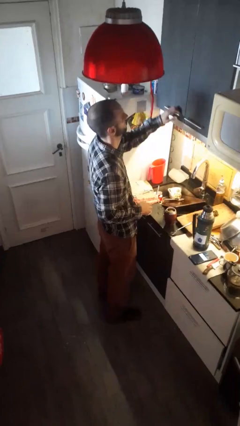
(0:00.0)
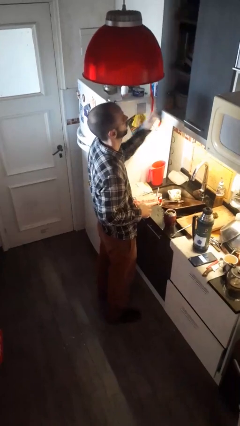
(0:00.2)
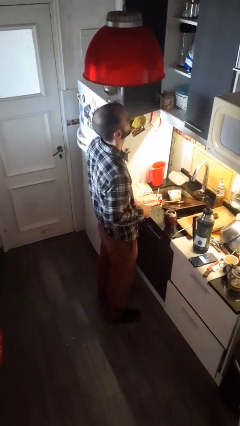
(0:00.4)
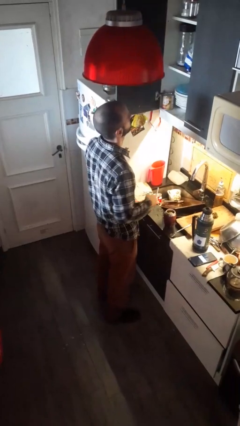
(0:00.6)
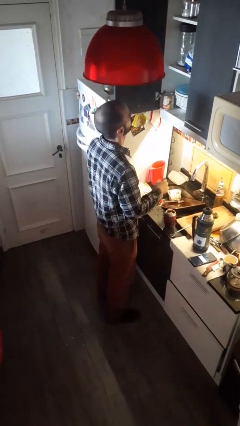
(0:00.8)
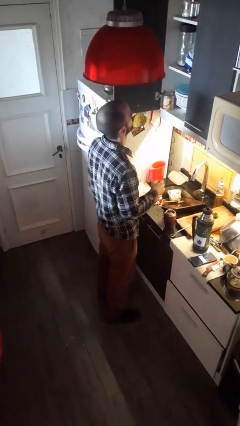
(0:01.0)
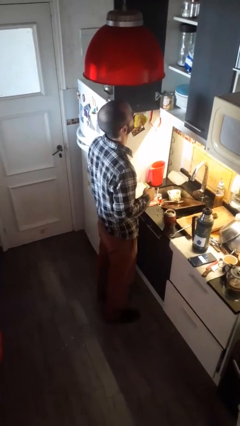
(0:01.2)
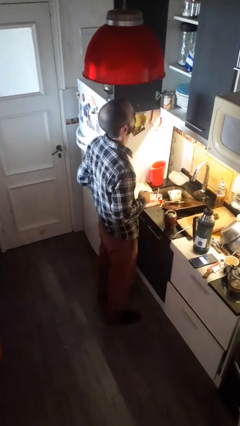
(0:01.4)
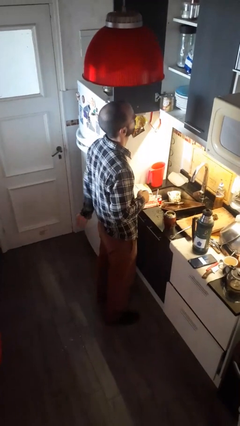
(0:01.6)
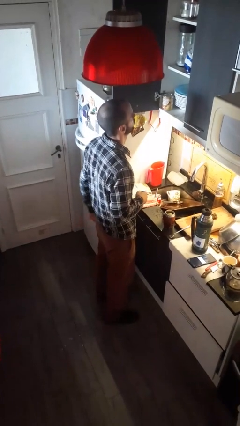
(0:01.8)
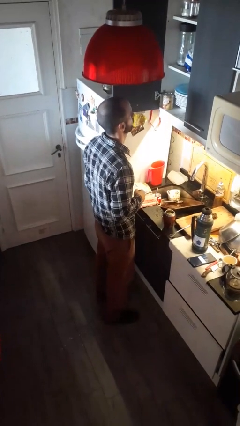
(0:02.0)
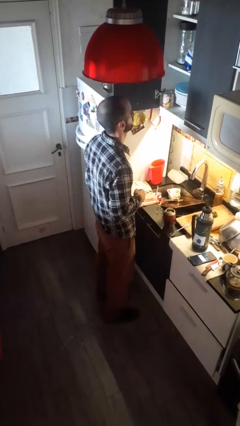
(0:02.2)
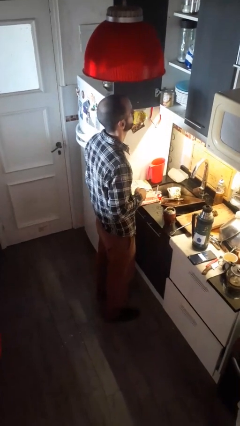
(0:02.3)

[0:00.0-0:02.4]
person opens kitchen drawer

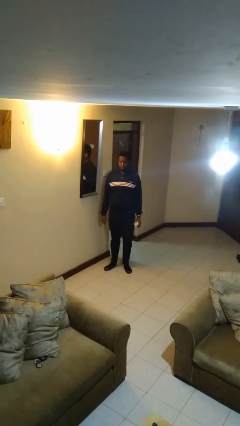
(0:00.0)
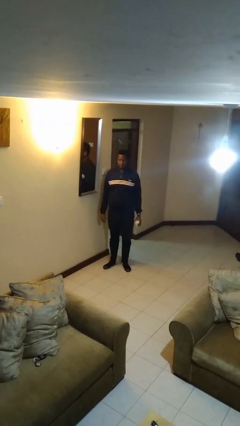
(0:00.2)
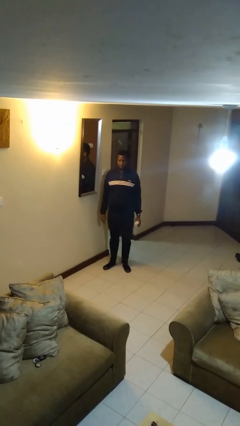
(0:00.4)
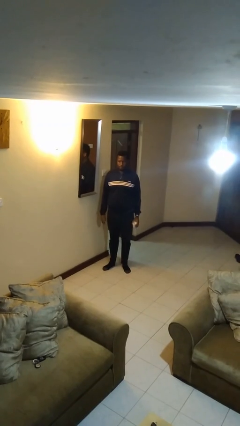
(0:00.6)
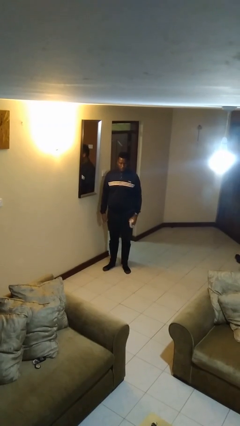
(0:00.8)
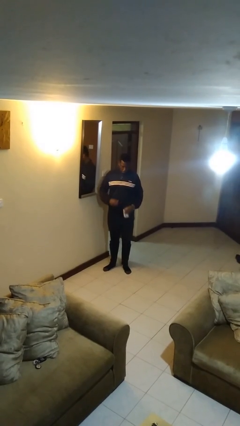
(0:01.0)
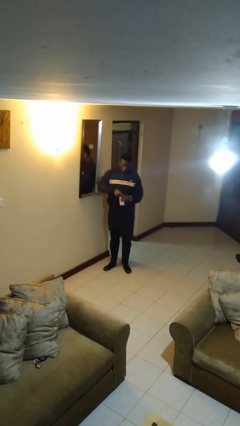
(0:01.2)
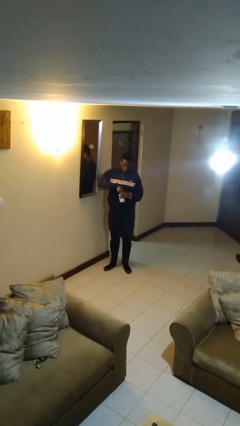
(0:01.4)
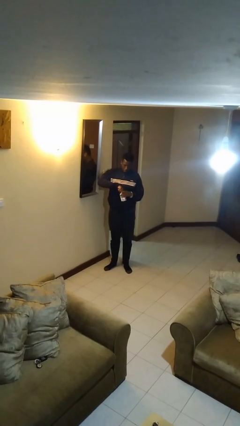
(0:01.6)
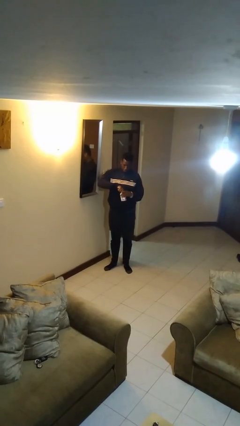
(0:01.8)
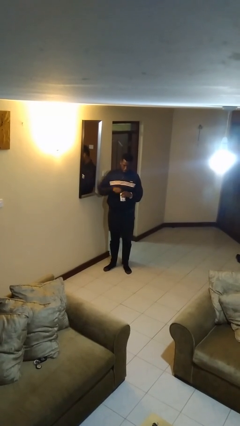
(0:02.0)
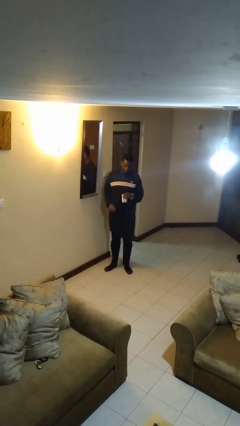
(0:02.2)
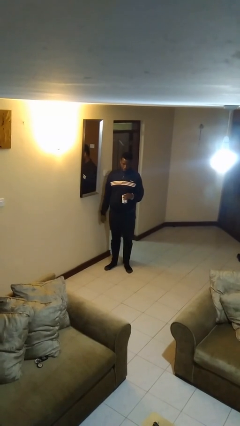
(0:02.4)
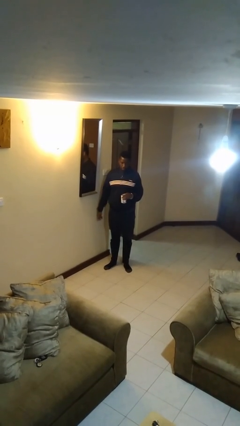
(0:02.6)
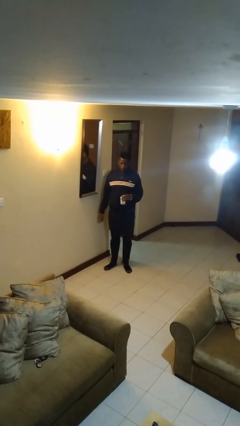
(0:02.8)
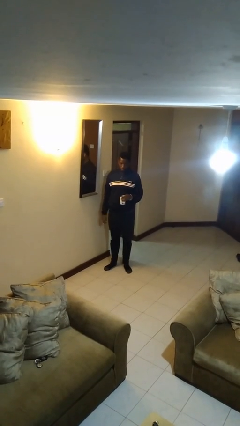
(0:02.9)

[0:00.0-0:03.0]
person opens beverage can

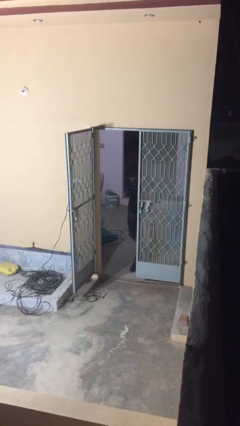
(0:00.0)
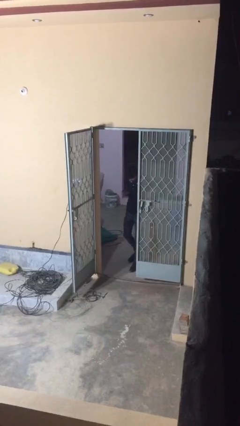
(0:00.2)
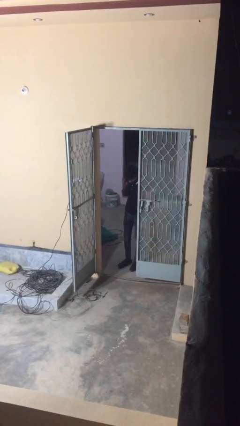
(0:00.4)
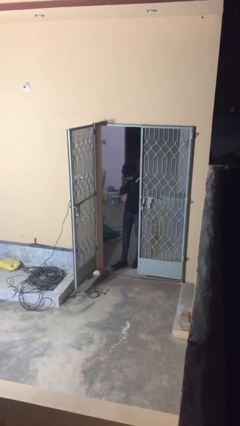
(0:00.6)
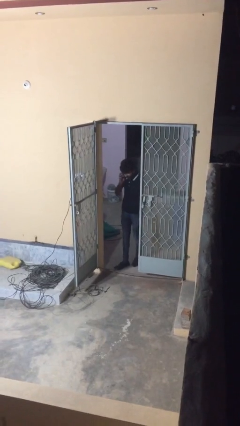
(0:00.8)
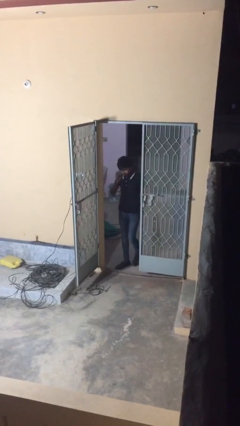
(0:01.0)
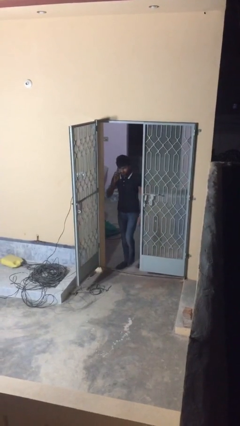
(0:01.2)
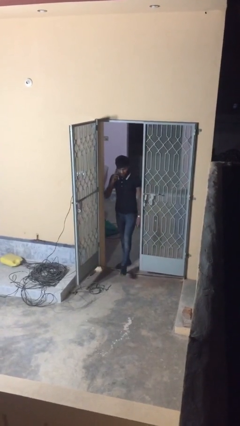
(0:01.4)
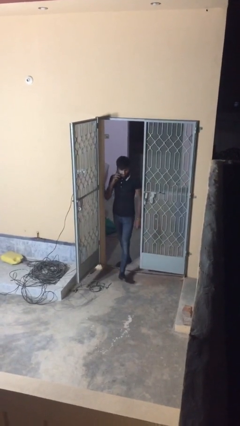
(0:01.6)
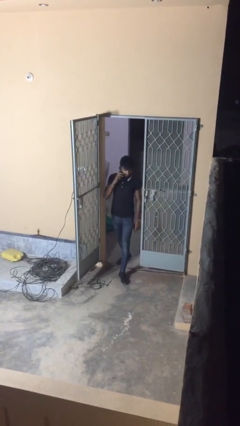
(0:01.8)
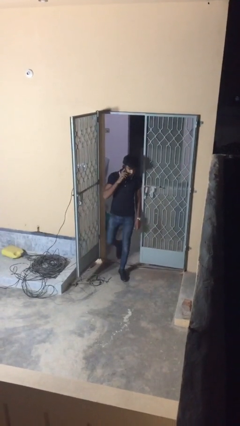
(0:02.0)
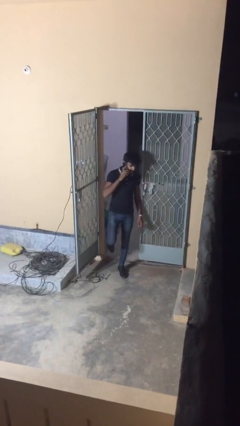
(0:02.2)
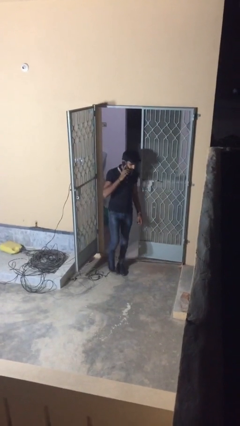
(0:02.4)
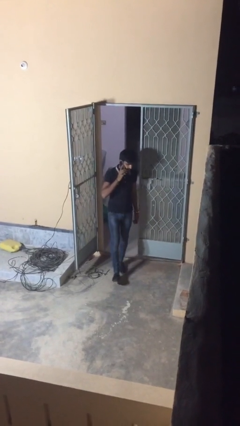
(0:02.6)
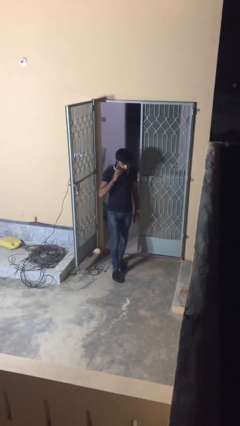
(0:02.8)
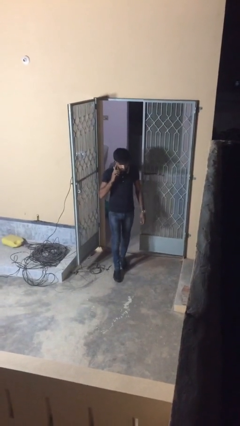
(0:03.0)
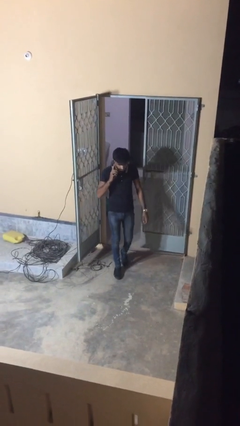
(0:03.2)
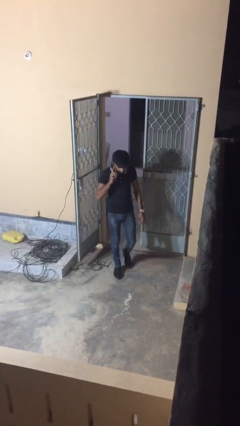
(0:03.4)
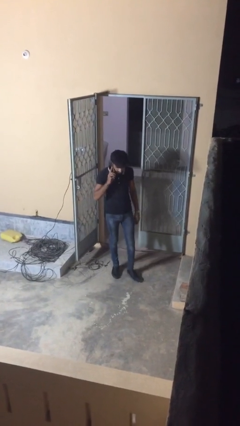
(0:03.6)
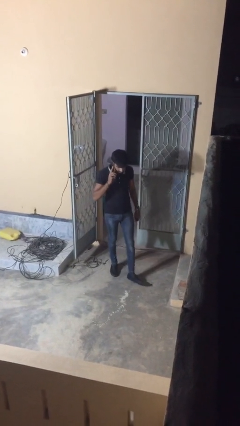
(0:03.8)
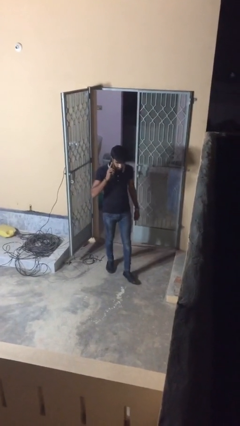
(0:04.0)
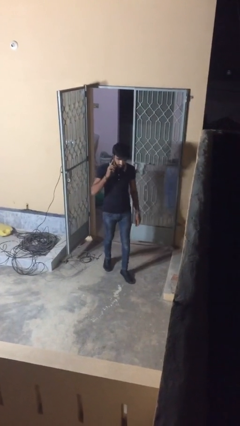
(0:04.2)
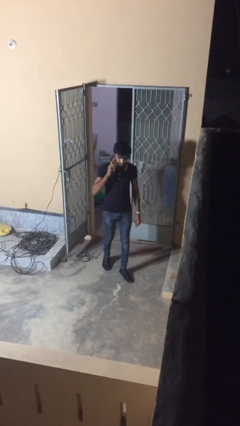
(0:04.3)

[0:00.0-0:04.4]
person enters scene through structure

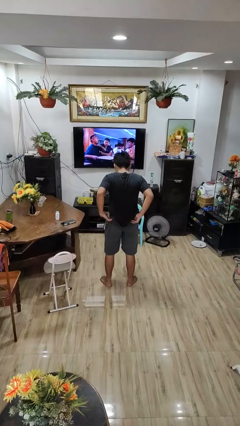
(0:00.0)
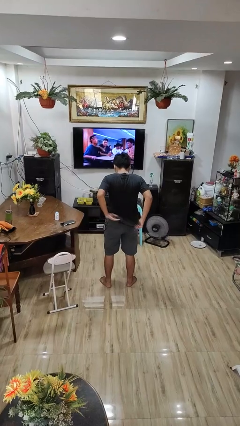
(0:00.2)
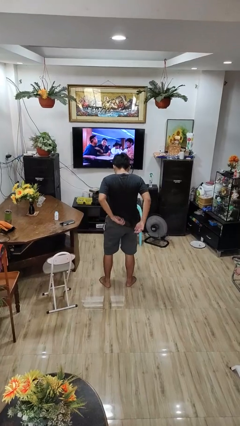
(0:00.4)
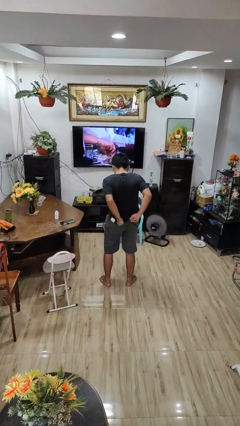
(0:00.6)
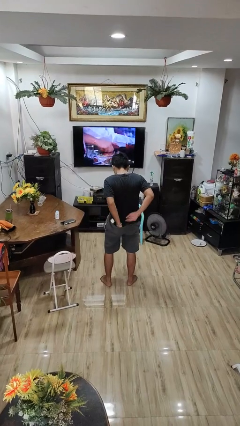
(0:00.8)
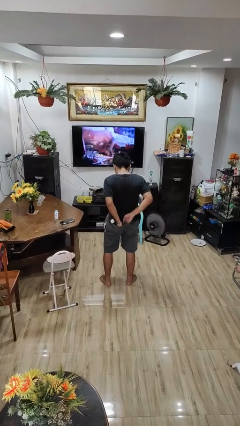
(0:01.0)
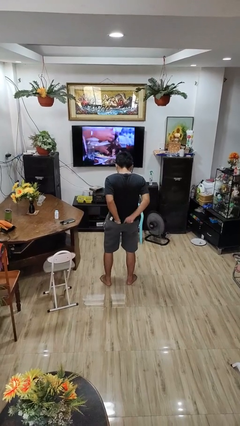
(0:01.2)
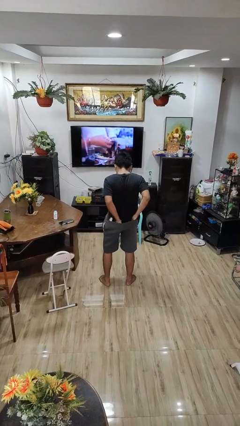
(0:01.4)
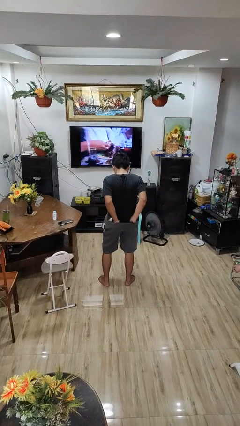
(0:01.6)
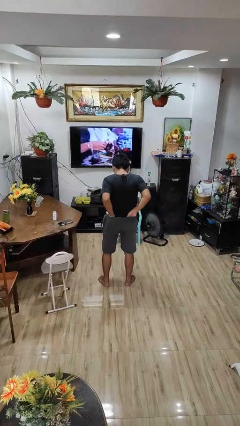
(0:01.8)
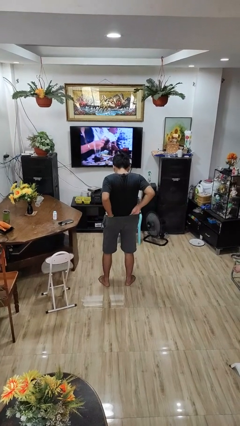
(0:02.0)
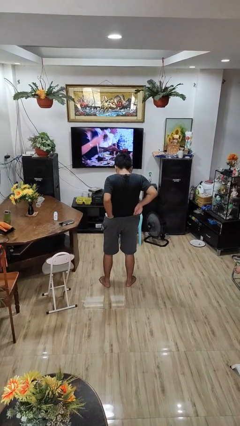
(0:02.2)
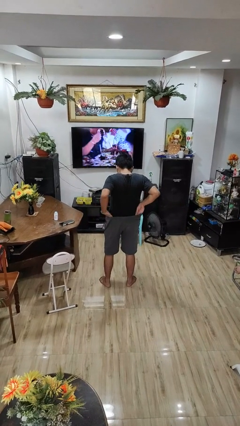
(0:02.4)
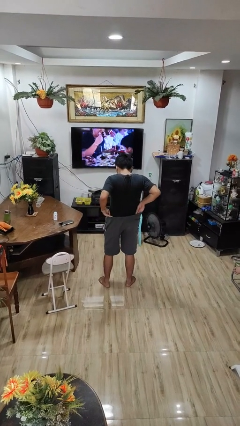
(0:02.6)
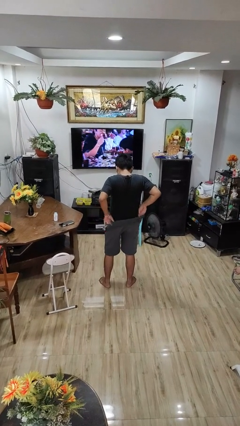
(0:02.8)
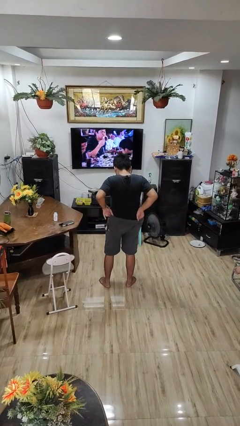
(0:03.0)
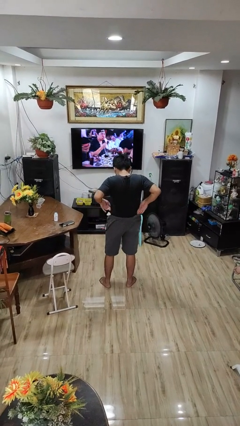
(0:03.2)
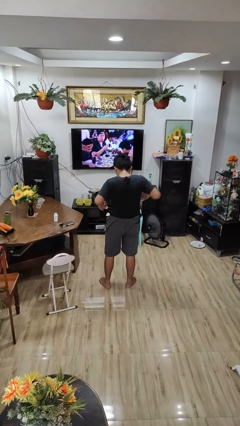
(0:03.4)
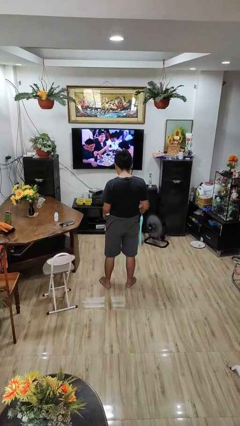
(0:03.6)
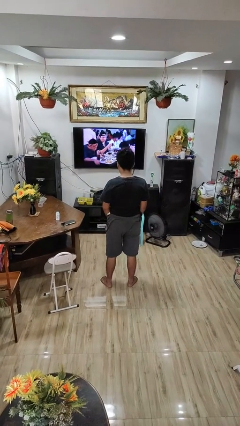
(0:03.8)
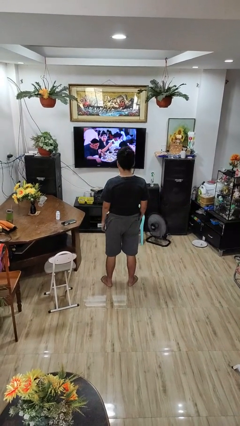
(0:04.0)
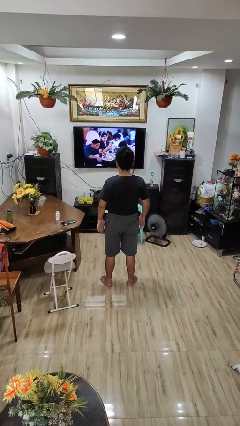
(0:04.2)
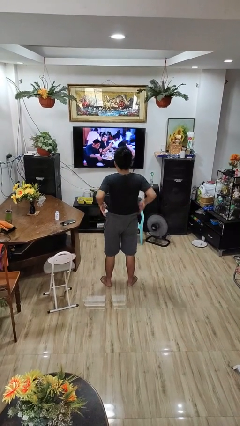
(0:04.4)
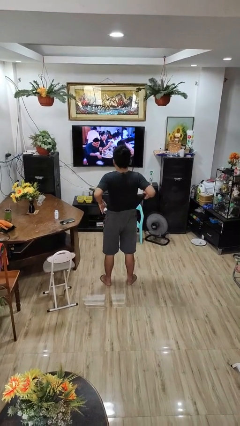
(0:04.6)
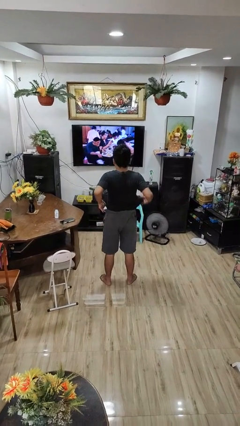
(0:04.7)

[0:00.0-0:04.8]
person tucks in shirt

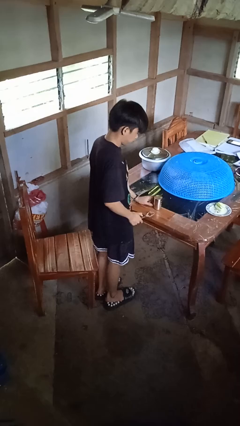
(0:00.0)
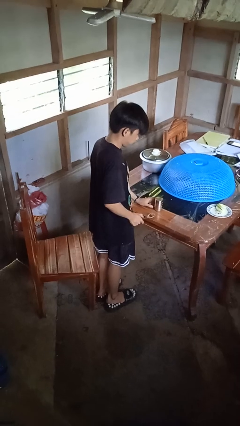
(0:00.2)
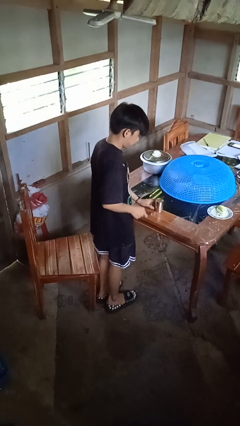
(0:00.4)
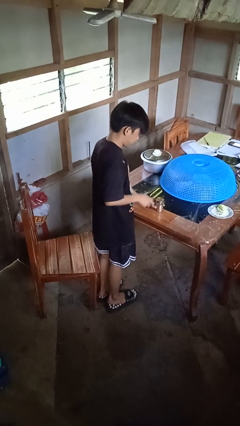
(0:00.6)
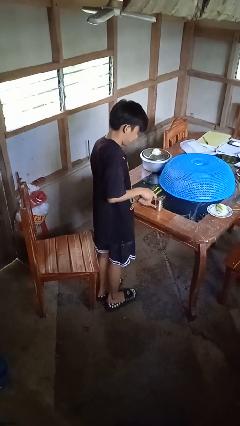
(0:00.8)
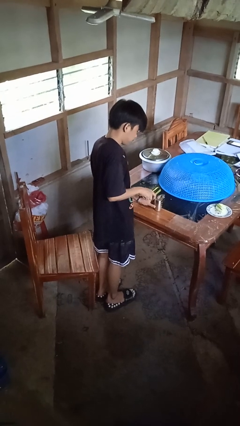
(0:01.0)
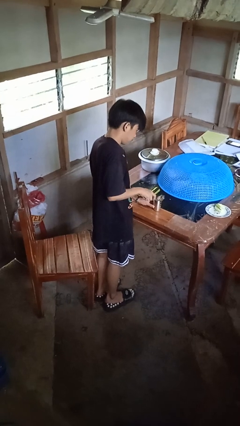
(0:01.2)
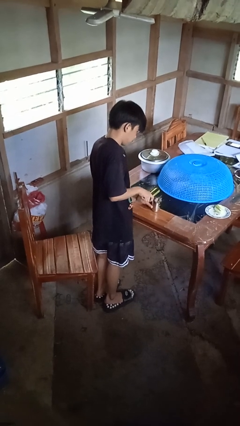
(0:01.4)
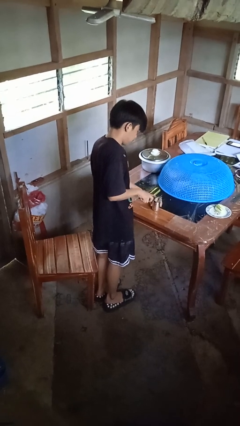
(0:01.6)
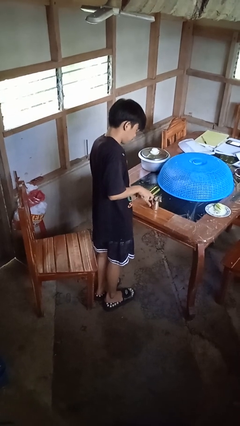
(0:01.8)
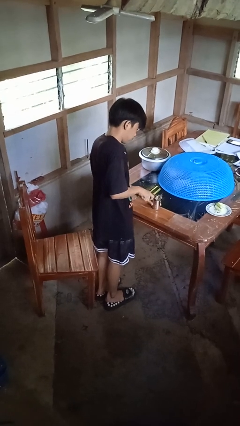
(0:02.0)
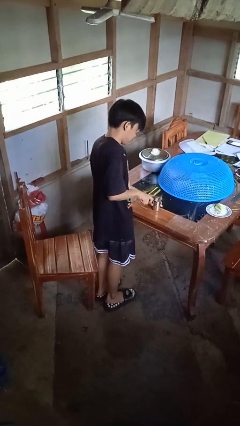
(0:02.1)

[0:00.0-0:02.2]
person opens can with can opener

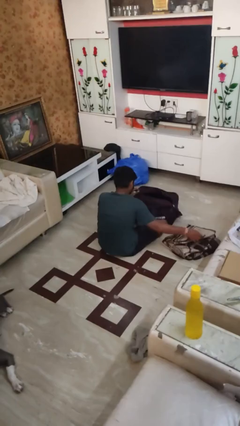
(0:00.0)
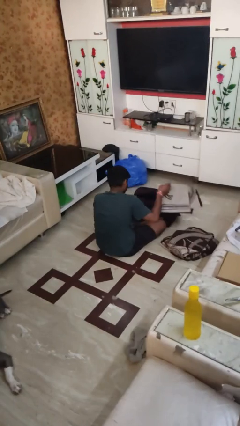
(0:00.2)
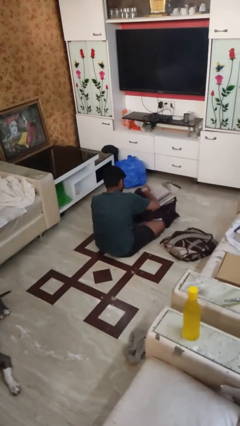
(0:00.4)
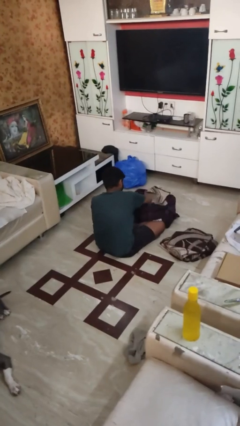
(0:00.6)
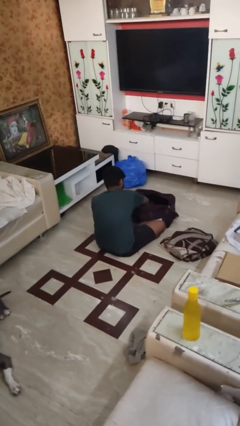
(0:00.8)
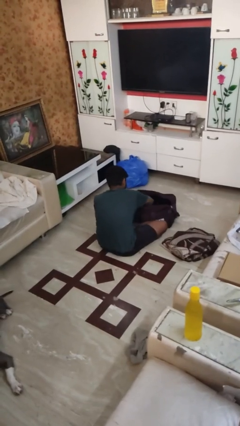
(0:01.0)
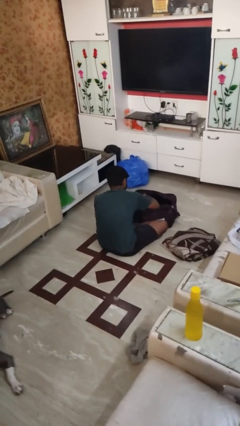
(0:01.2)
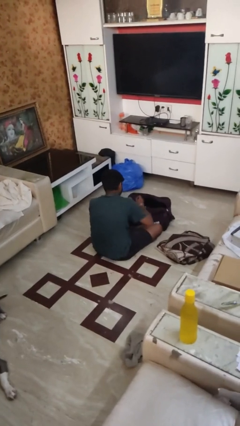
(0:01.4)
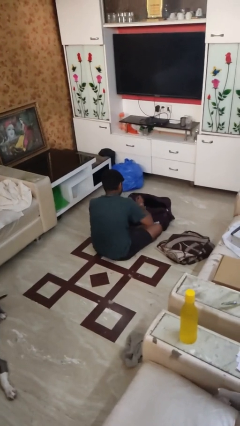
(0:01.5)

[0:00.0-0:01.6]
person loads clothes into suitcase
